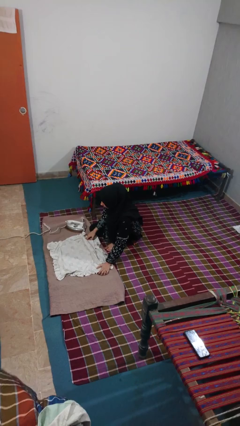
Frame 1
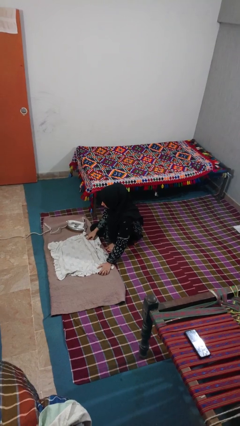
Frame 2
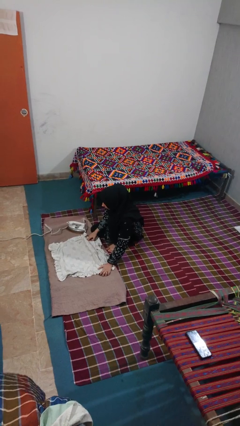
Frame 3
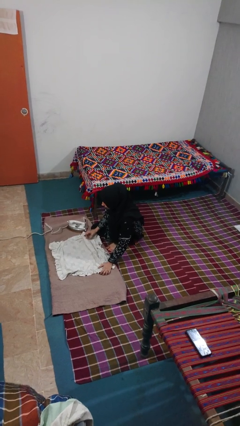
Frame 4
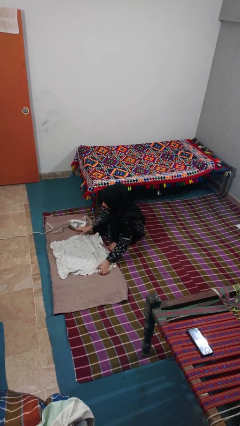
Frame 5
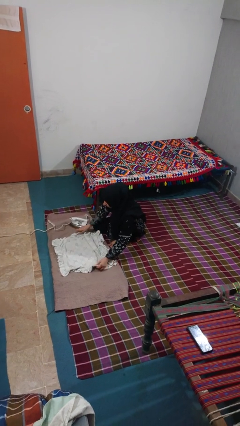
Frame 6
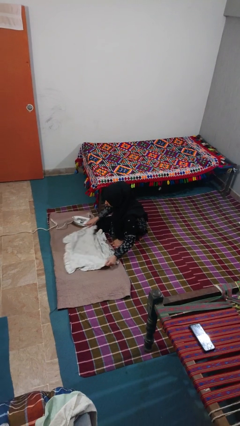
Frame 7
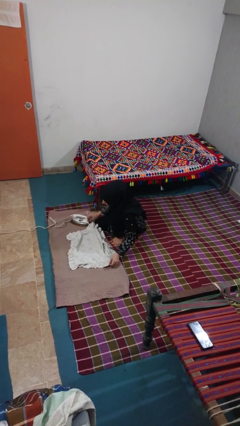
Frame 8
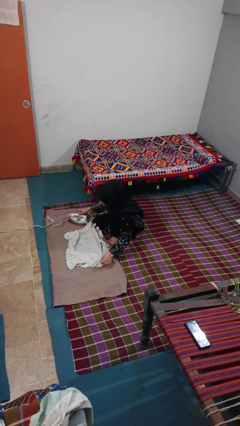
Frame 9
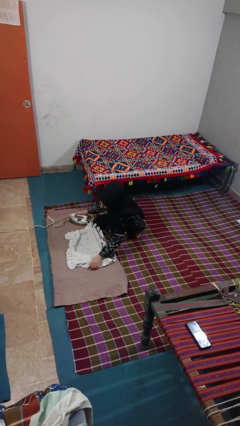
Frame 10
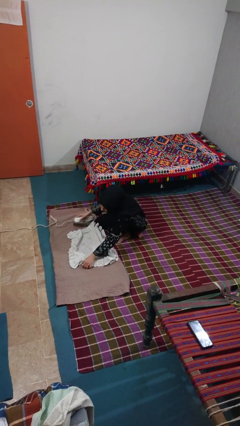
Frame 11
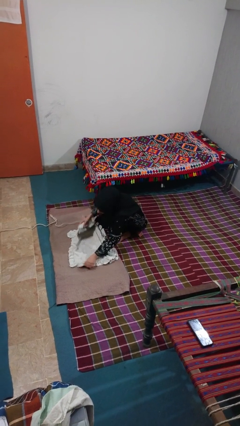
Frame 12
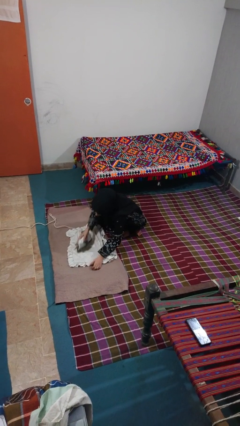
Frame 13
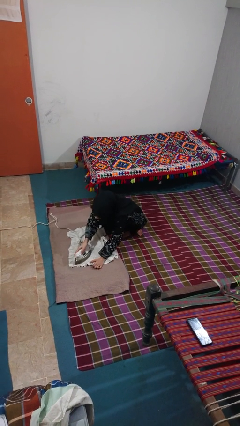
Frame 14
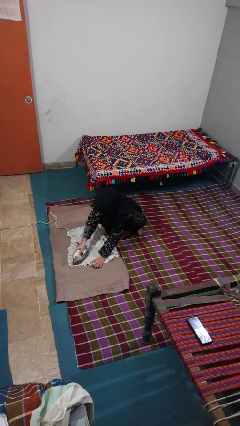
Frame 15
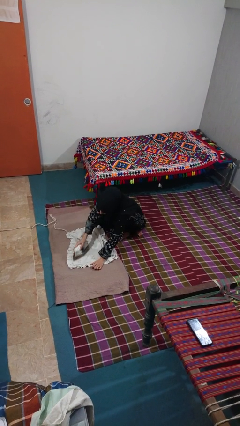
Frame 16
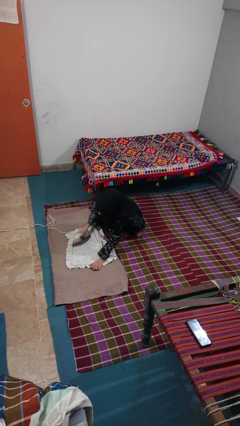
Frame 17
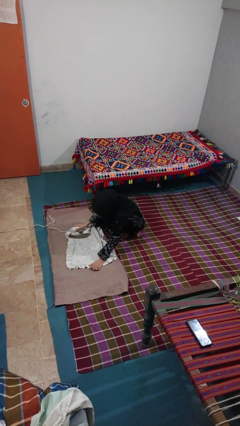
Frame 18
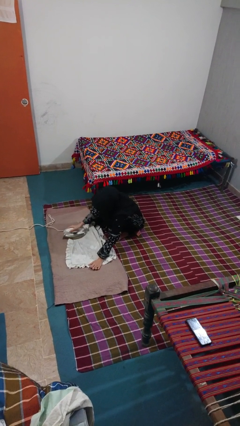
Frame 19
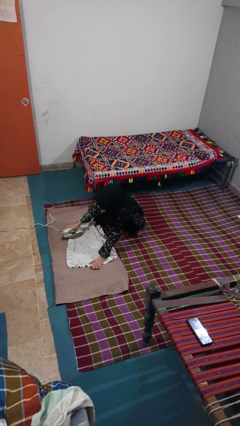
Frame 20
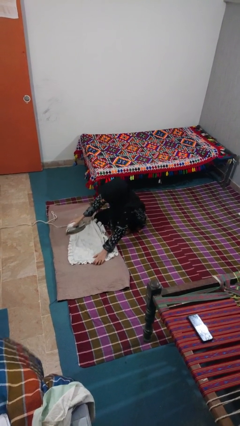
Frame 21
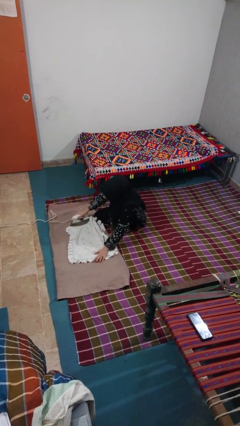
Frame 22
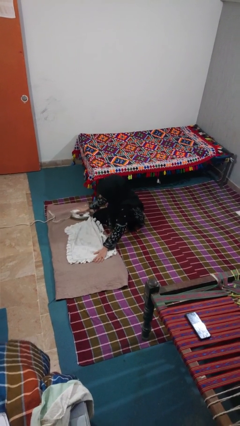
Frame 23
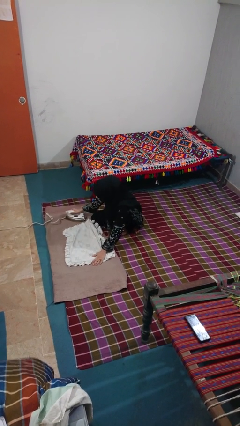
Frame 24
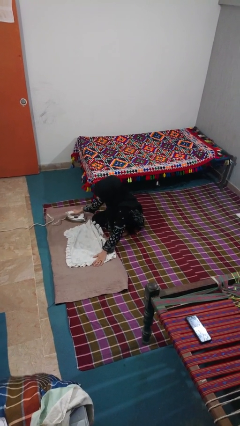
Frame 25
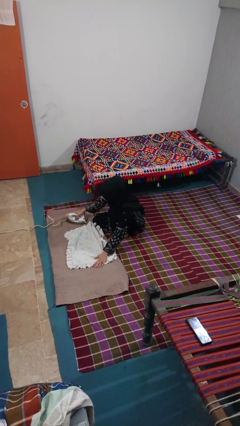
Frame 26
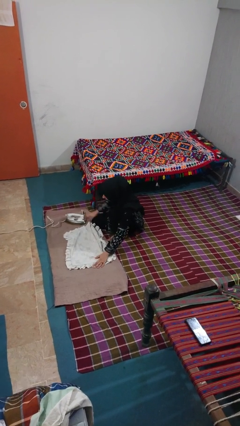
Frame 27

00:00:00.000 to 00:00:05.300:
person irons clothes

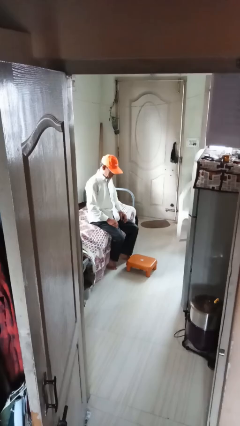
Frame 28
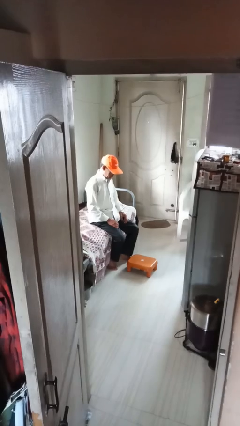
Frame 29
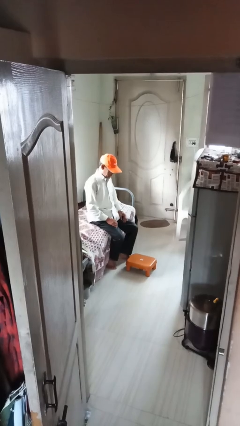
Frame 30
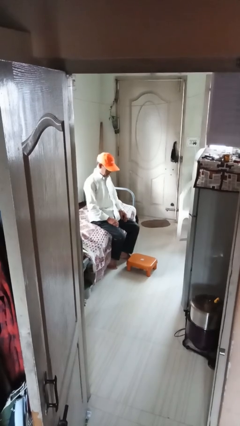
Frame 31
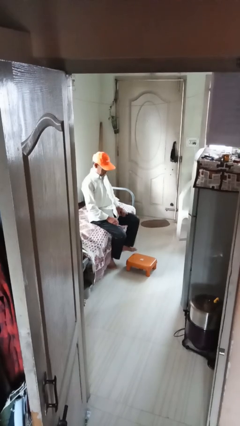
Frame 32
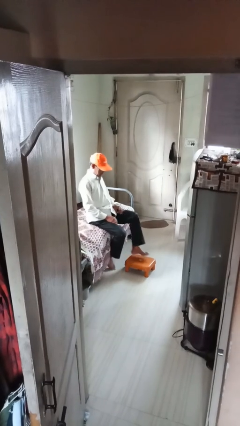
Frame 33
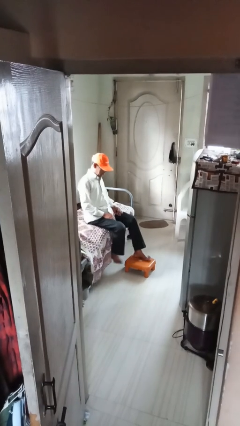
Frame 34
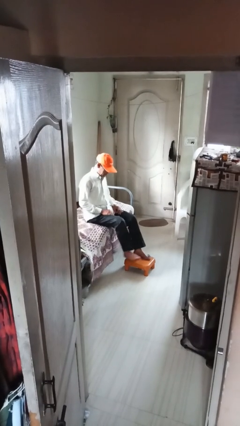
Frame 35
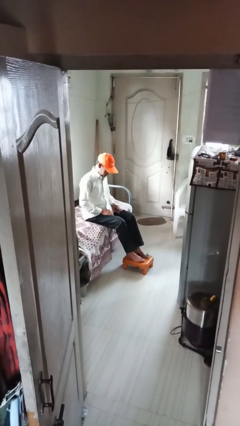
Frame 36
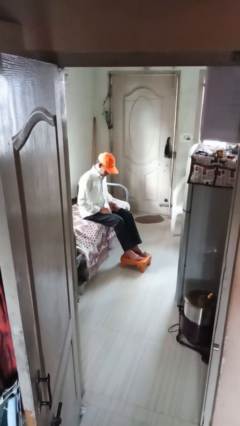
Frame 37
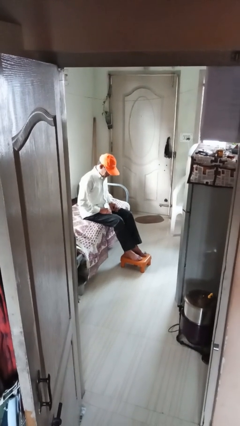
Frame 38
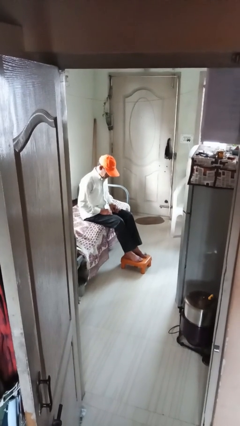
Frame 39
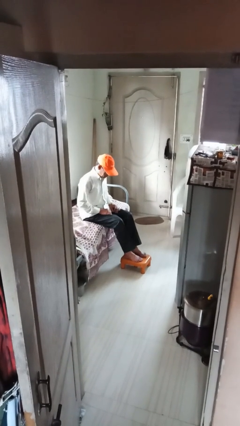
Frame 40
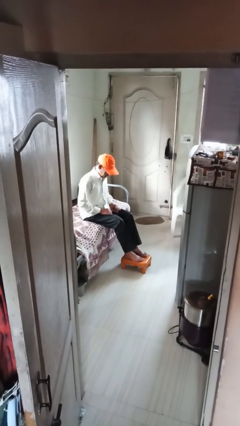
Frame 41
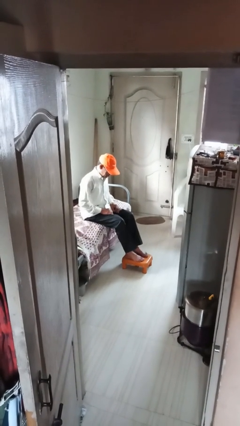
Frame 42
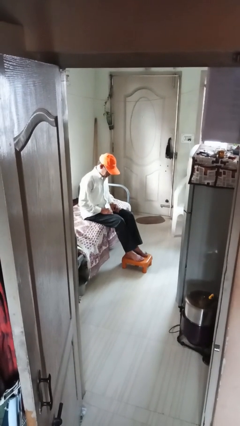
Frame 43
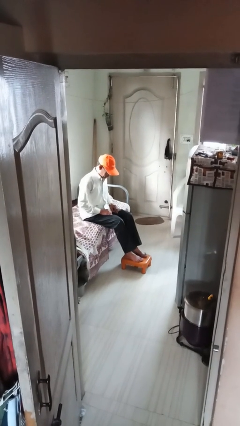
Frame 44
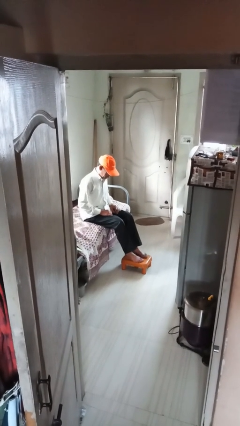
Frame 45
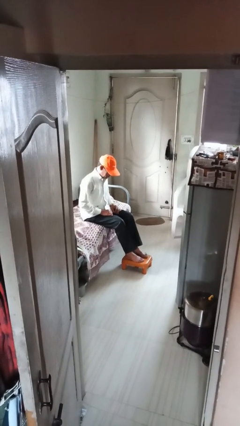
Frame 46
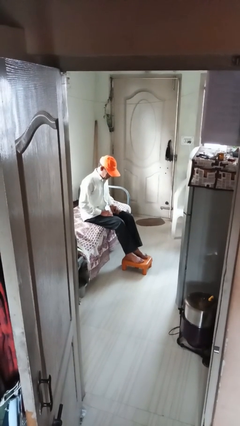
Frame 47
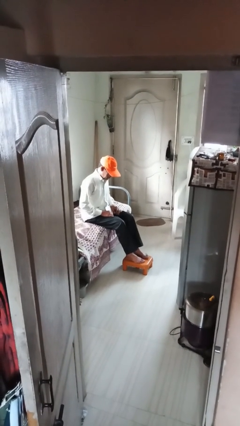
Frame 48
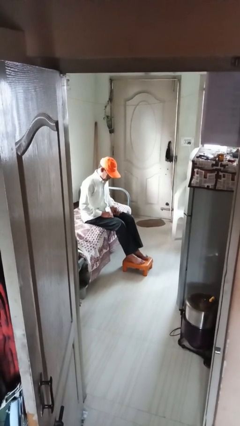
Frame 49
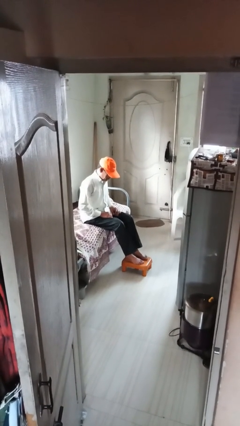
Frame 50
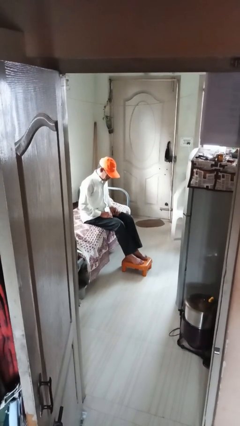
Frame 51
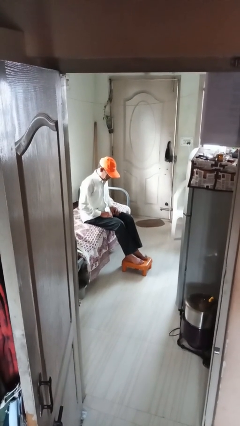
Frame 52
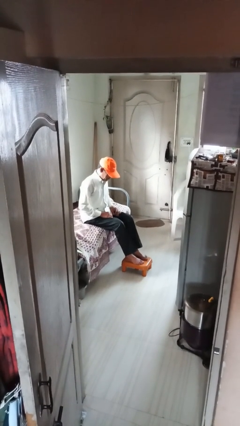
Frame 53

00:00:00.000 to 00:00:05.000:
person puts feet up

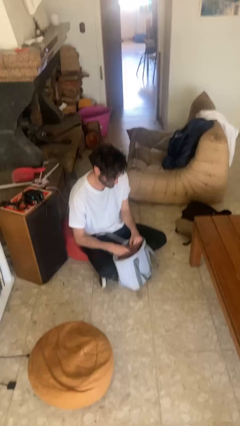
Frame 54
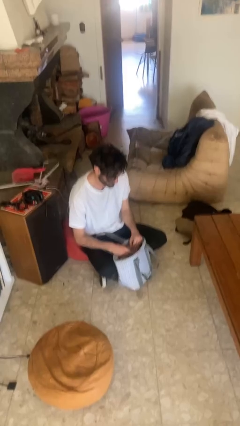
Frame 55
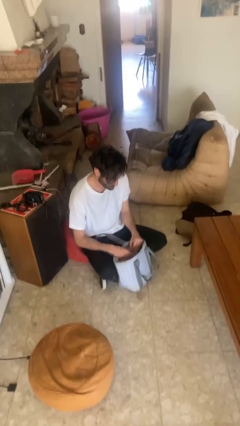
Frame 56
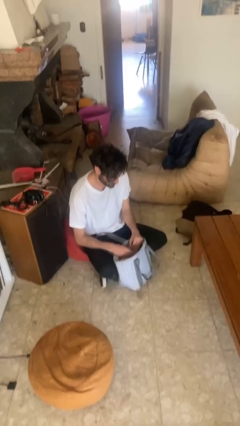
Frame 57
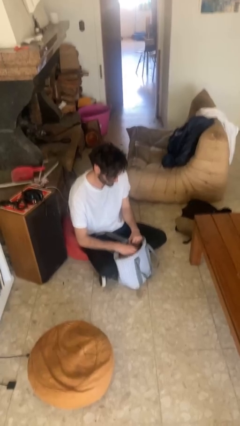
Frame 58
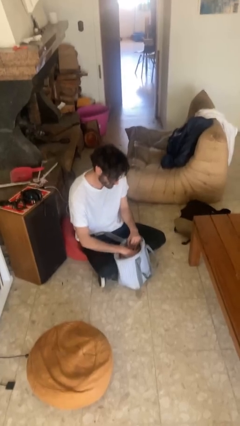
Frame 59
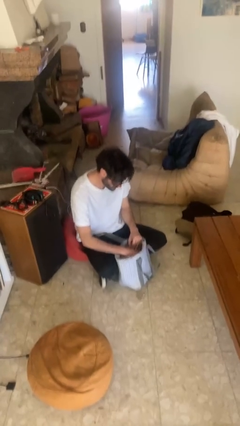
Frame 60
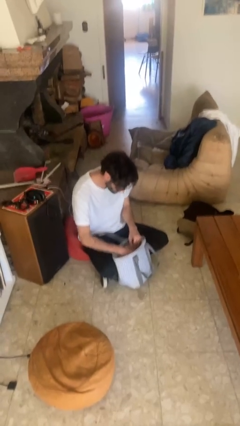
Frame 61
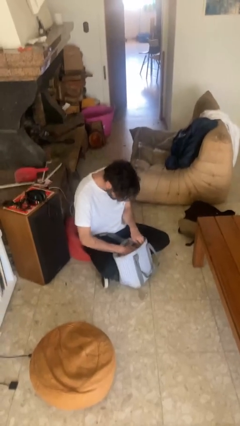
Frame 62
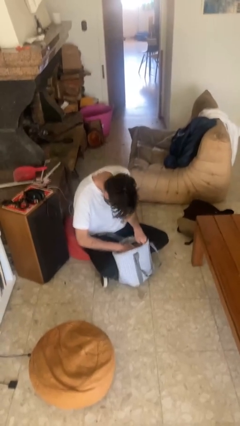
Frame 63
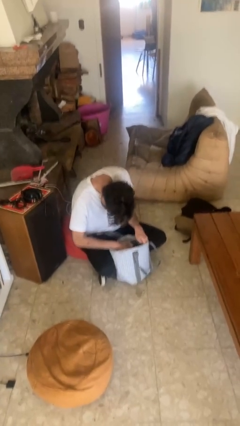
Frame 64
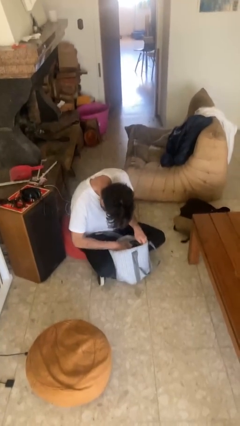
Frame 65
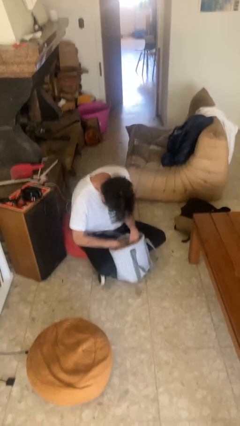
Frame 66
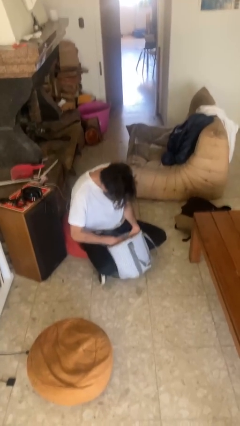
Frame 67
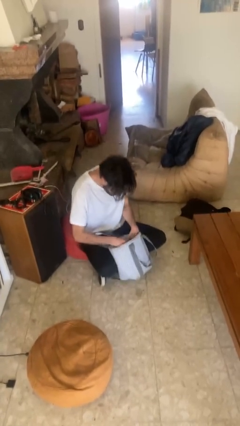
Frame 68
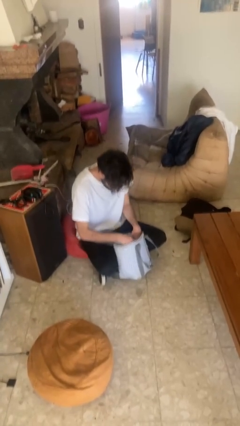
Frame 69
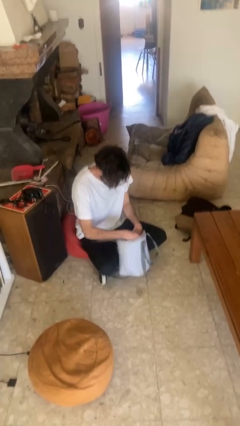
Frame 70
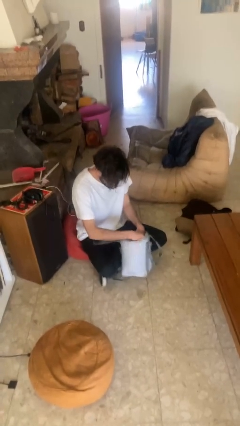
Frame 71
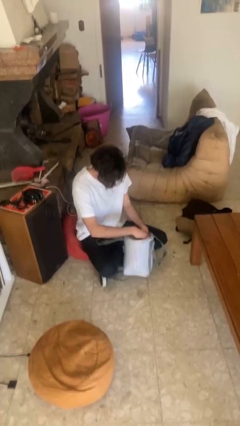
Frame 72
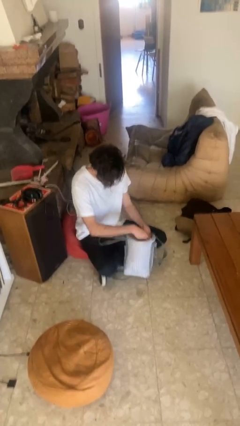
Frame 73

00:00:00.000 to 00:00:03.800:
person searches in purse

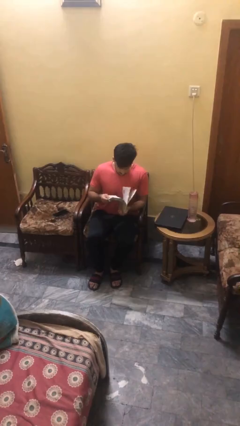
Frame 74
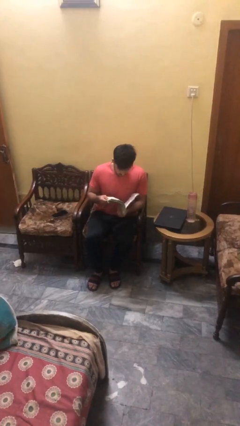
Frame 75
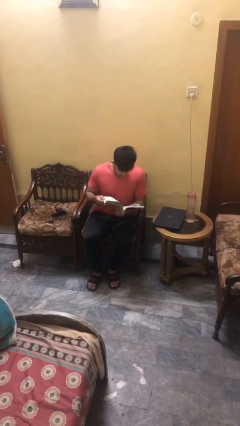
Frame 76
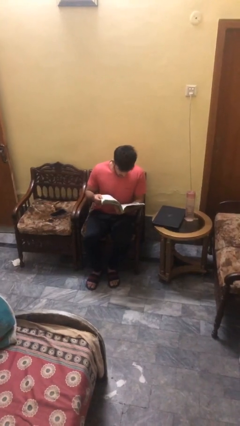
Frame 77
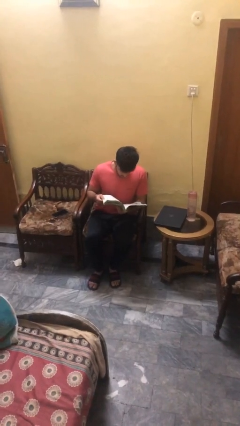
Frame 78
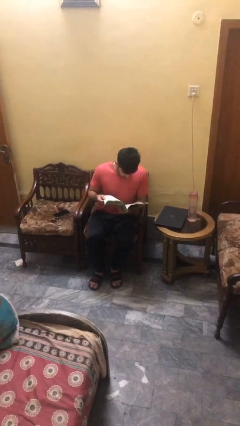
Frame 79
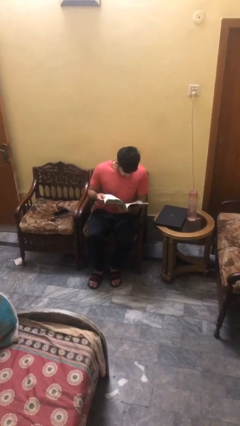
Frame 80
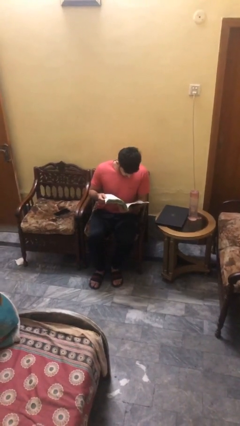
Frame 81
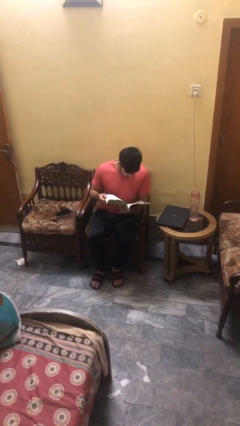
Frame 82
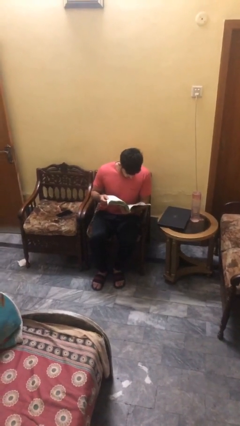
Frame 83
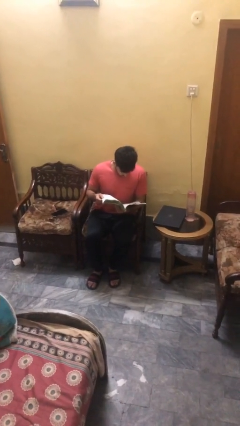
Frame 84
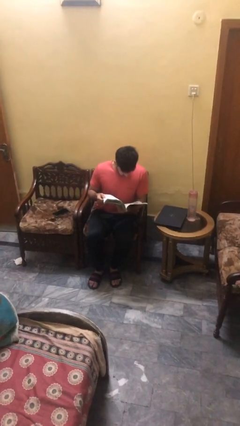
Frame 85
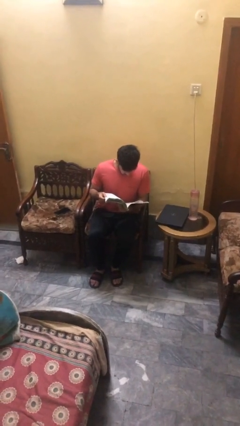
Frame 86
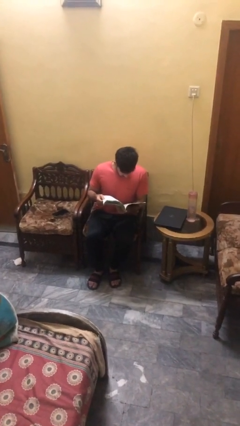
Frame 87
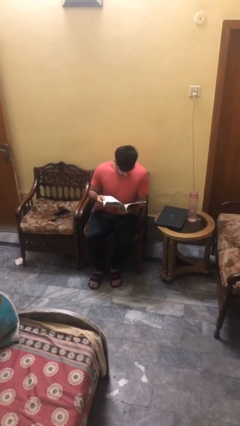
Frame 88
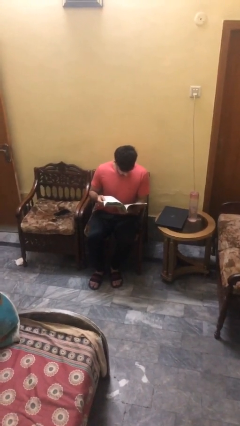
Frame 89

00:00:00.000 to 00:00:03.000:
person reads document

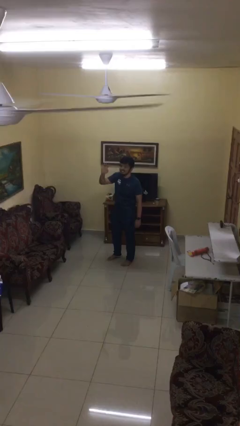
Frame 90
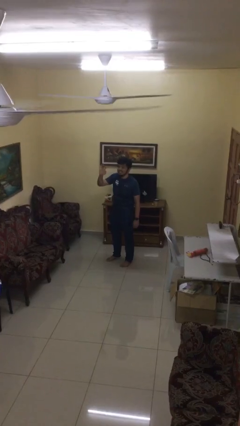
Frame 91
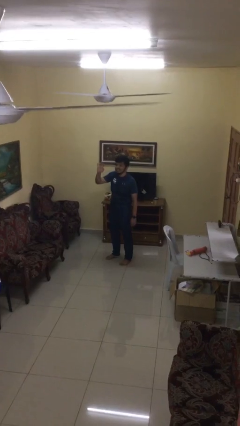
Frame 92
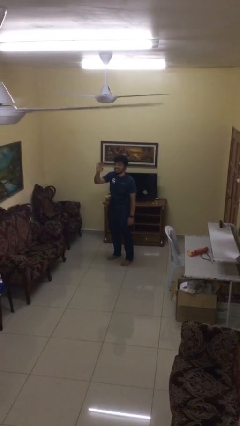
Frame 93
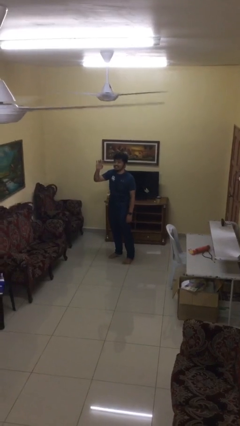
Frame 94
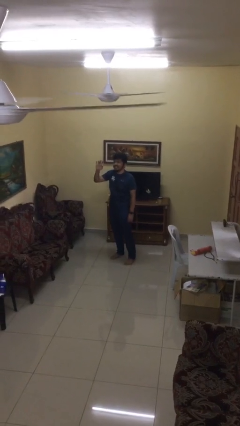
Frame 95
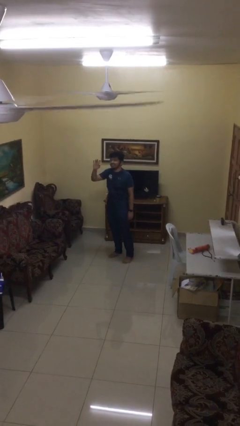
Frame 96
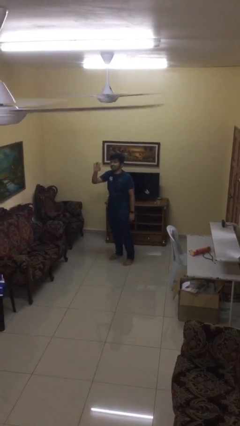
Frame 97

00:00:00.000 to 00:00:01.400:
person gestures lower hand
